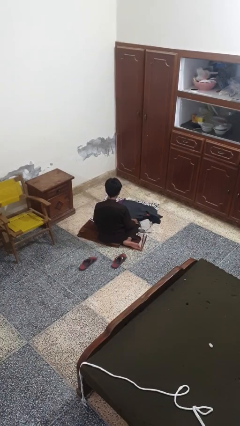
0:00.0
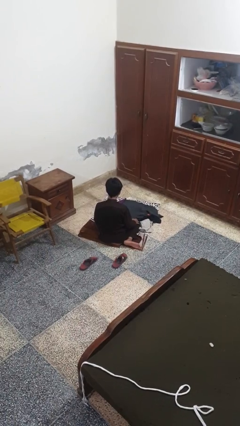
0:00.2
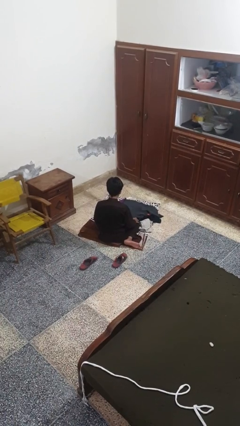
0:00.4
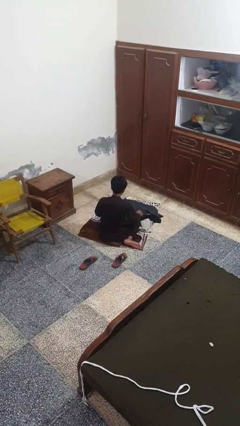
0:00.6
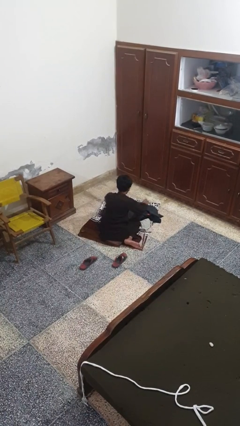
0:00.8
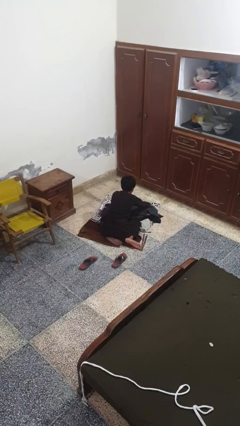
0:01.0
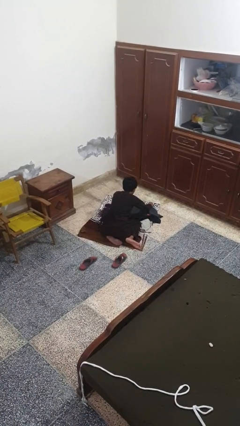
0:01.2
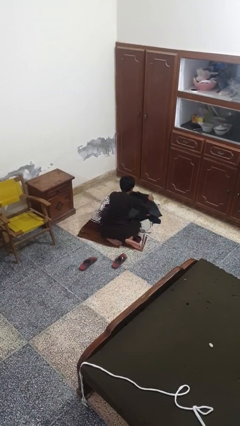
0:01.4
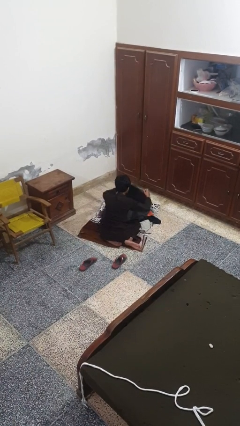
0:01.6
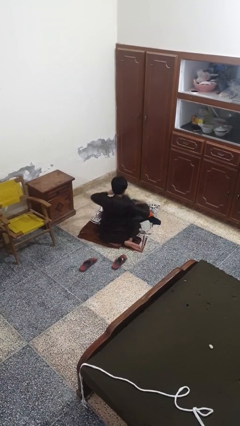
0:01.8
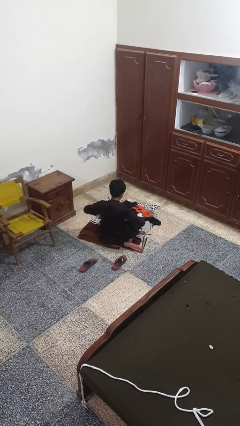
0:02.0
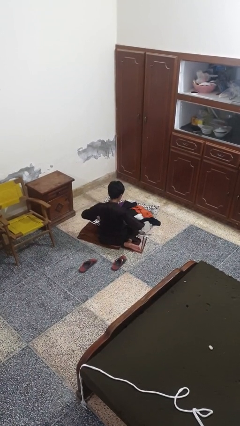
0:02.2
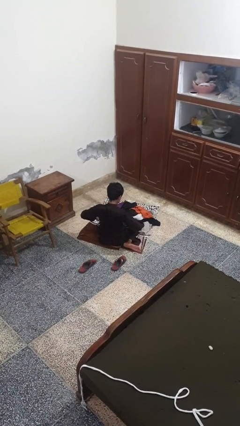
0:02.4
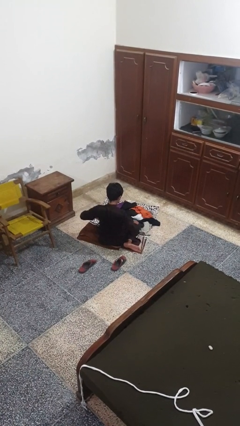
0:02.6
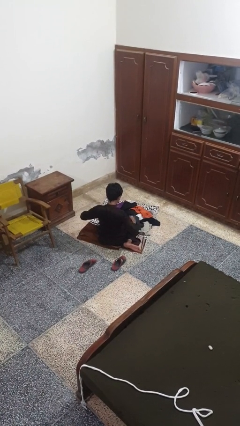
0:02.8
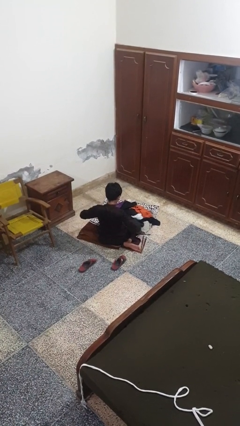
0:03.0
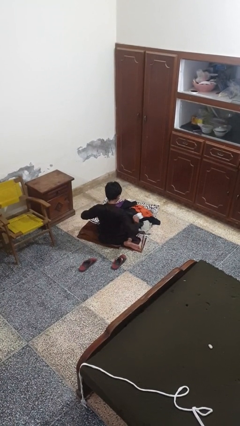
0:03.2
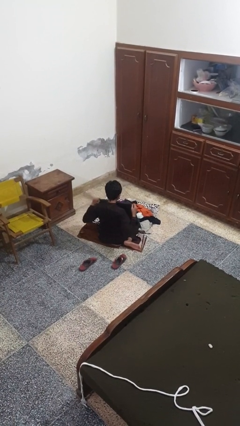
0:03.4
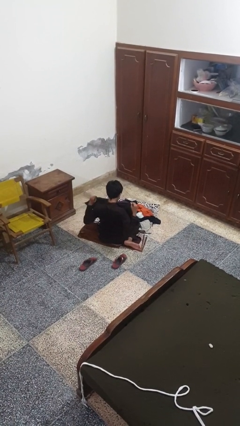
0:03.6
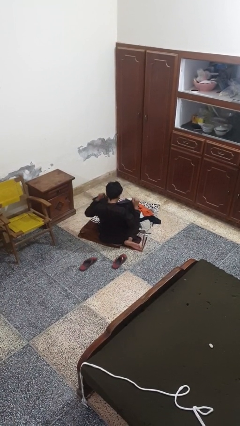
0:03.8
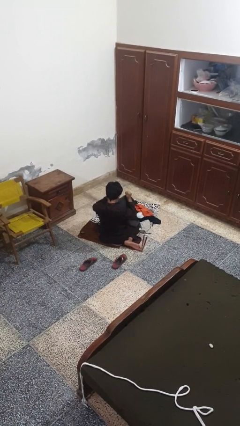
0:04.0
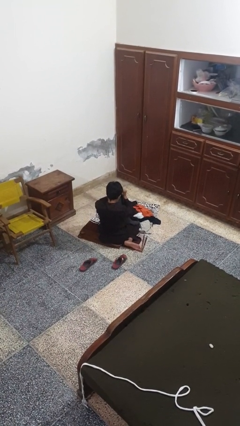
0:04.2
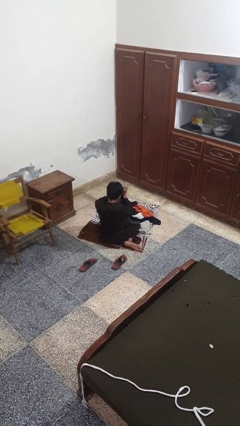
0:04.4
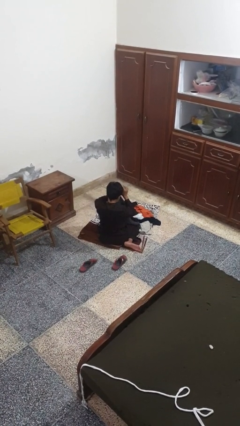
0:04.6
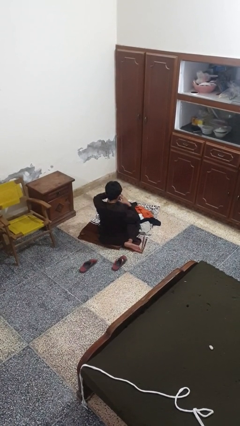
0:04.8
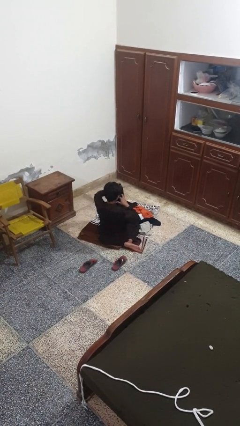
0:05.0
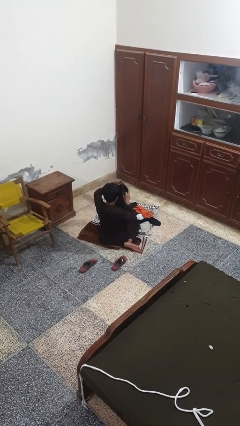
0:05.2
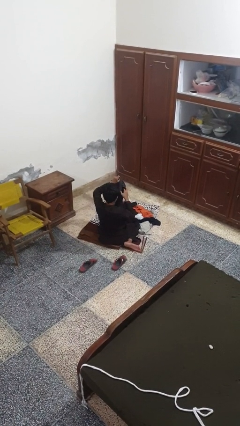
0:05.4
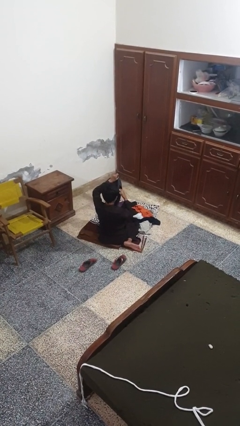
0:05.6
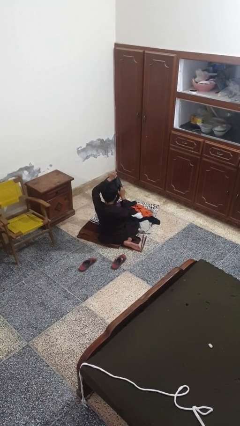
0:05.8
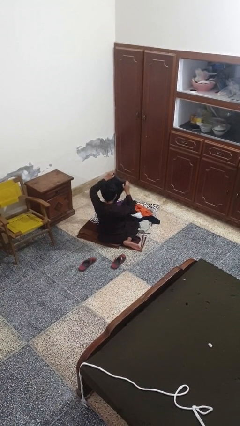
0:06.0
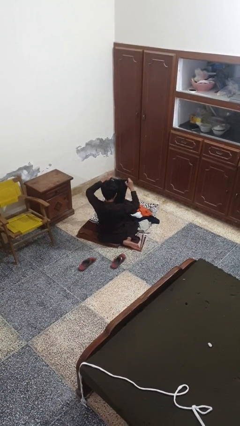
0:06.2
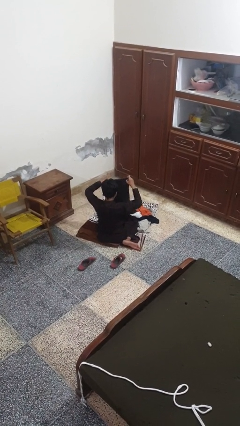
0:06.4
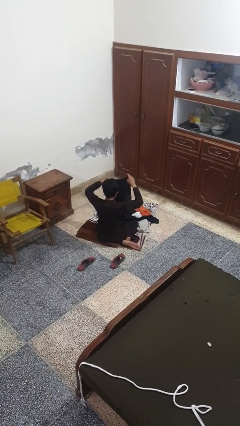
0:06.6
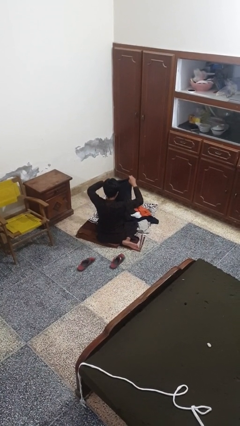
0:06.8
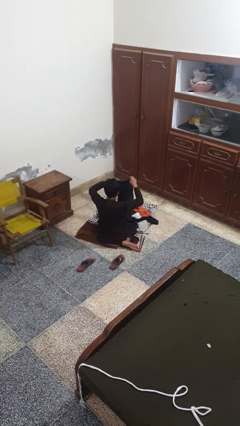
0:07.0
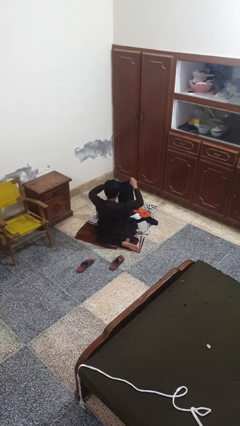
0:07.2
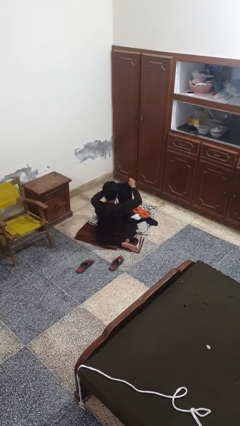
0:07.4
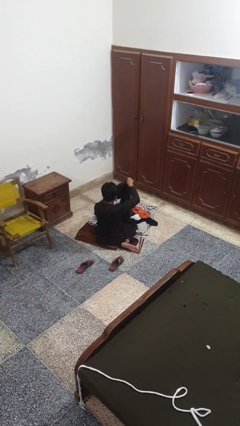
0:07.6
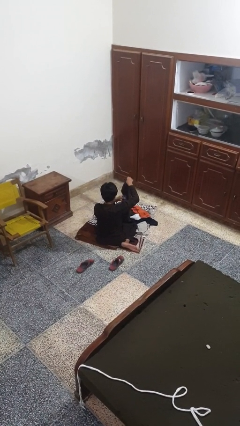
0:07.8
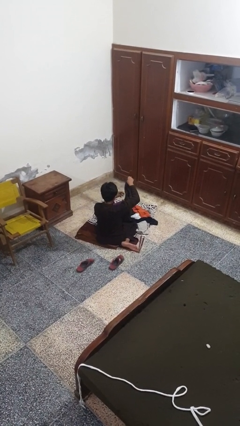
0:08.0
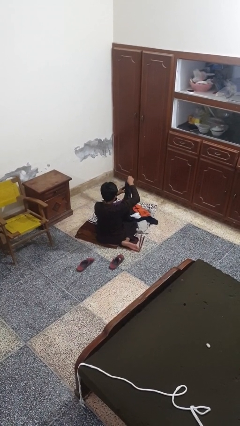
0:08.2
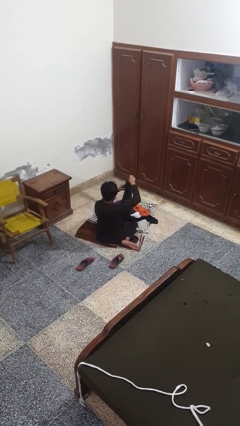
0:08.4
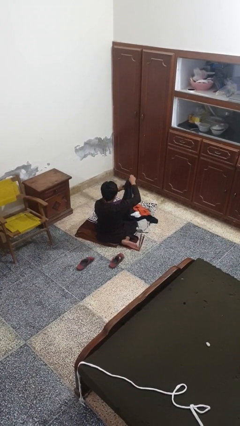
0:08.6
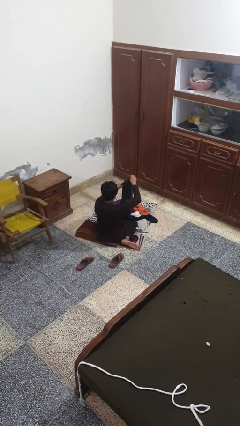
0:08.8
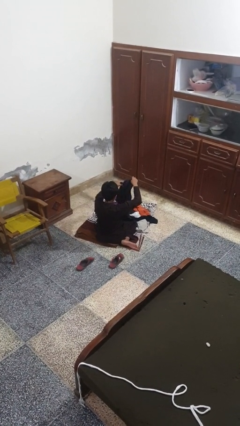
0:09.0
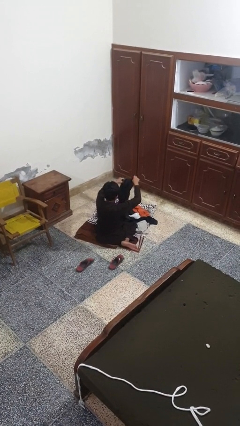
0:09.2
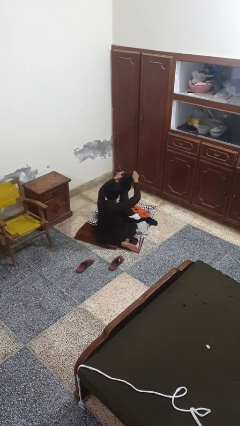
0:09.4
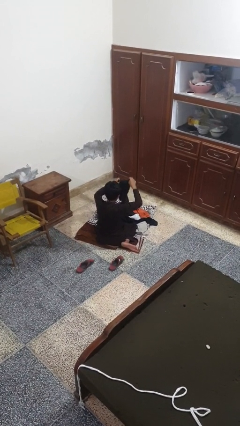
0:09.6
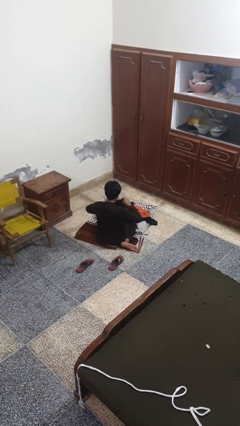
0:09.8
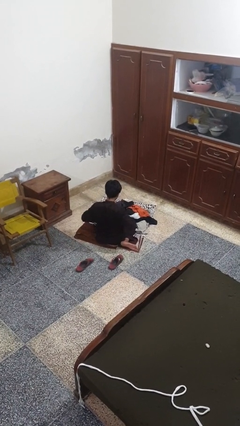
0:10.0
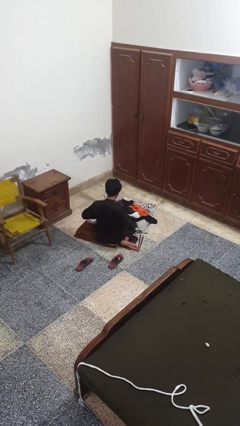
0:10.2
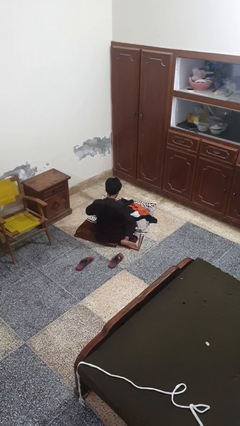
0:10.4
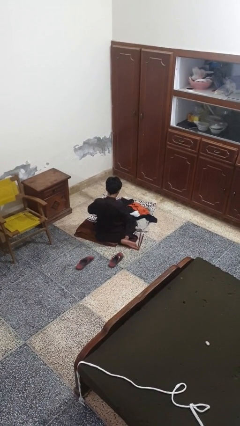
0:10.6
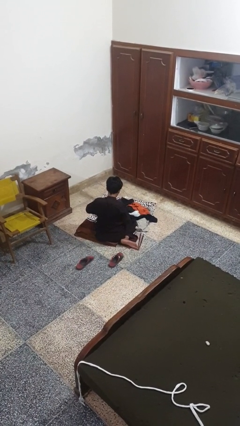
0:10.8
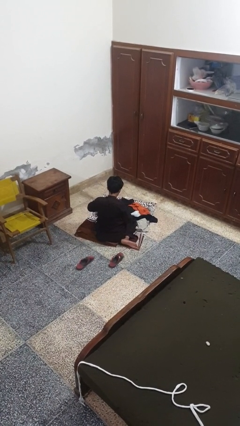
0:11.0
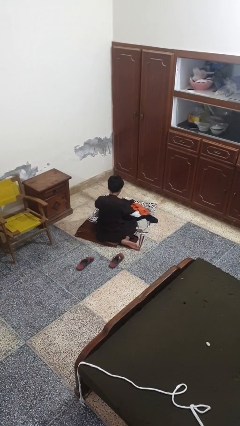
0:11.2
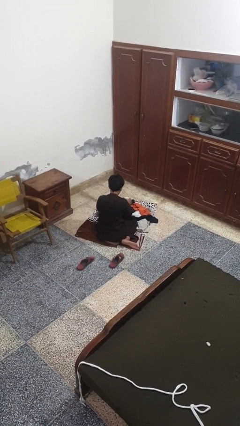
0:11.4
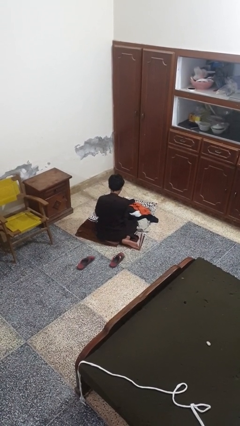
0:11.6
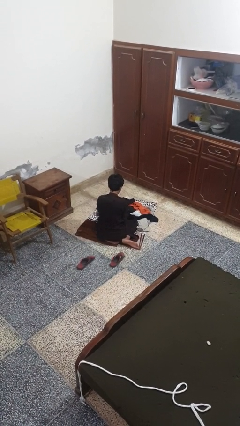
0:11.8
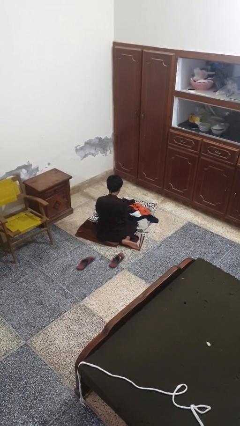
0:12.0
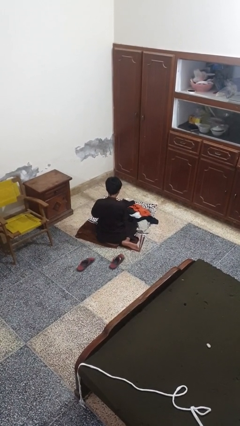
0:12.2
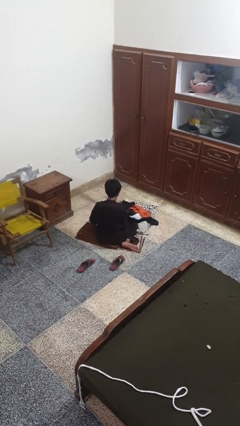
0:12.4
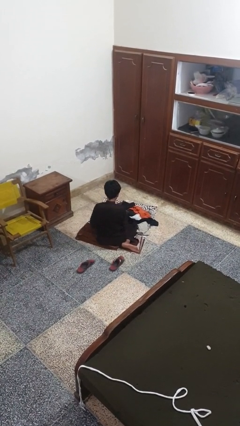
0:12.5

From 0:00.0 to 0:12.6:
person folds shirt

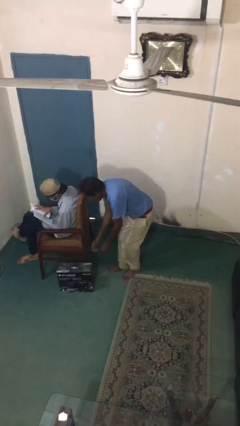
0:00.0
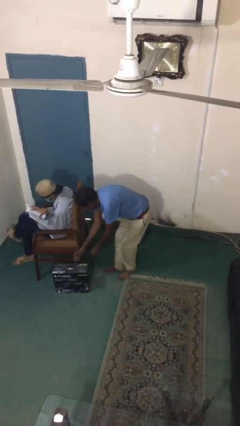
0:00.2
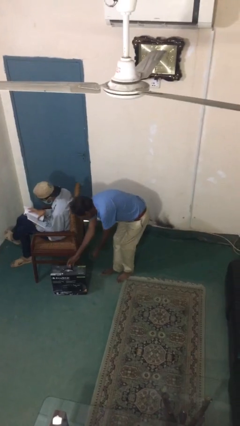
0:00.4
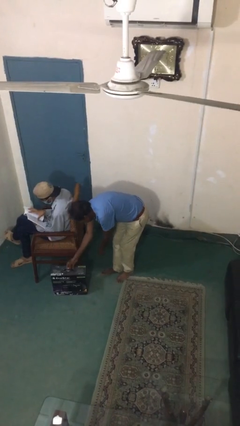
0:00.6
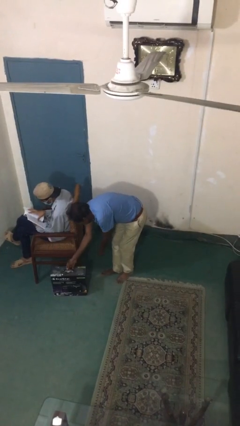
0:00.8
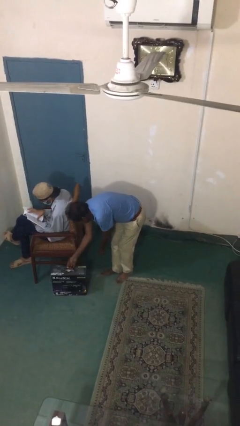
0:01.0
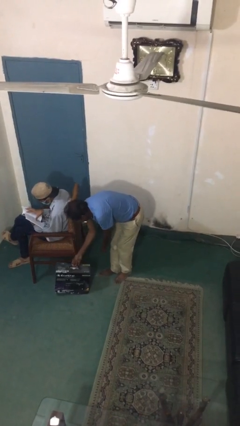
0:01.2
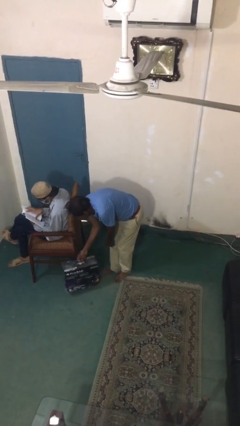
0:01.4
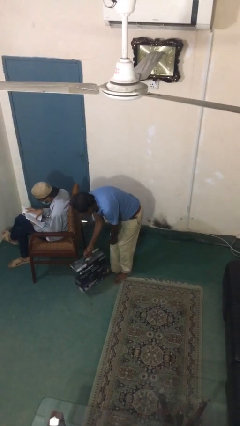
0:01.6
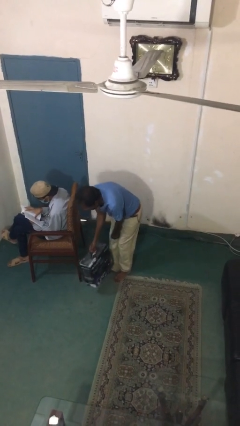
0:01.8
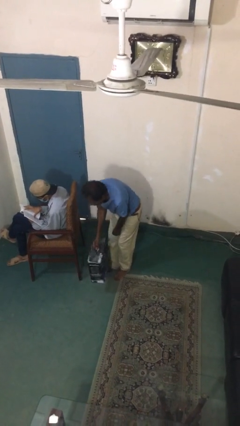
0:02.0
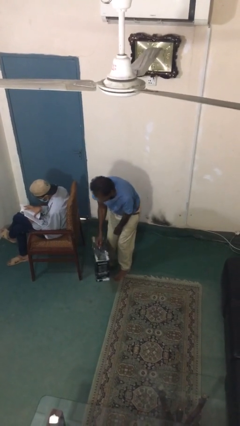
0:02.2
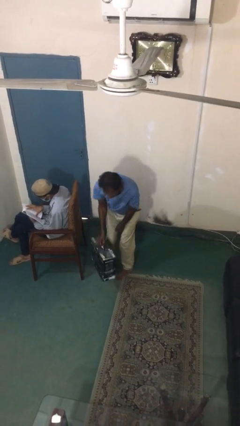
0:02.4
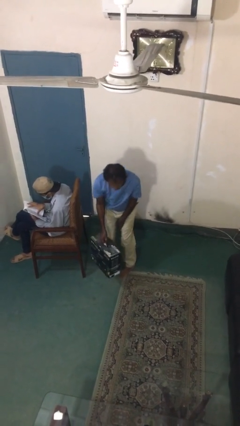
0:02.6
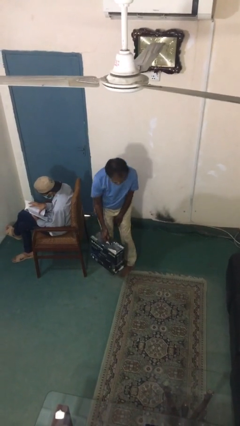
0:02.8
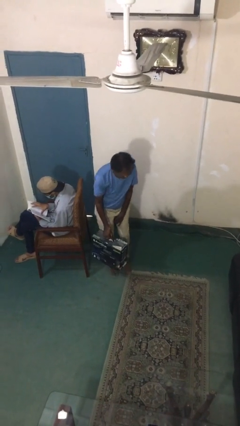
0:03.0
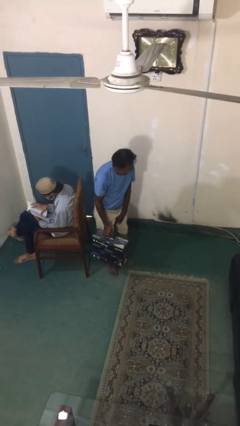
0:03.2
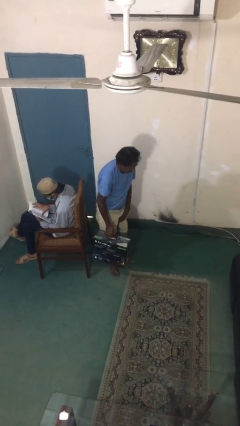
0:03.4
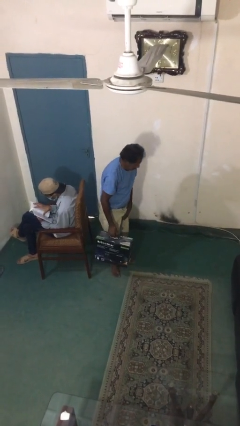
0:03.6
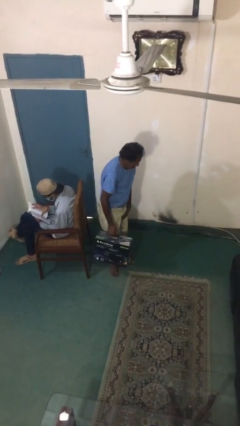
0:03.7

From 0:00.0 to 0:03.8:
person steals object from person

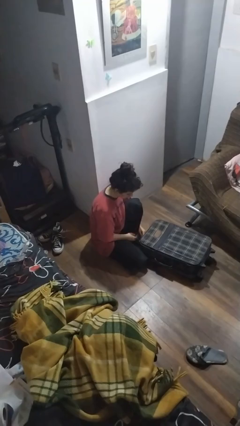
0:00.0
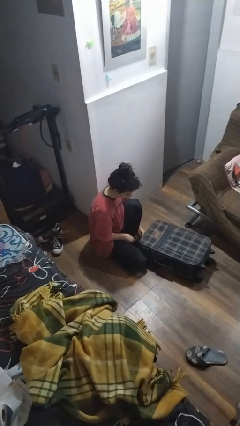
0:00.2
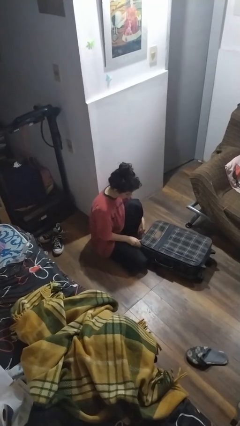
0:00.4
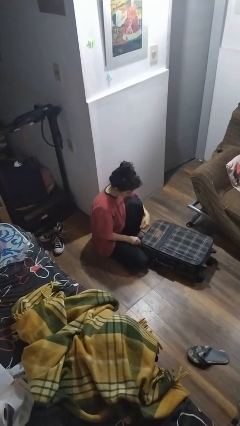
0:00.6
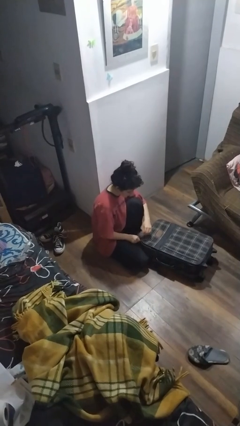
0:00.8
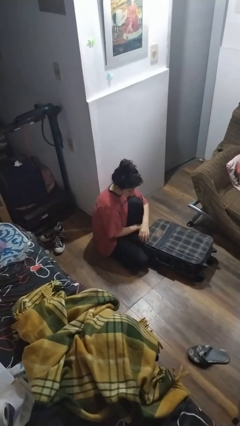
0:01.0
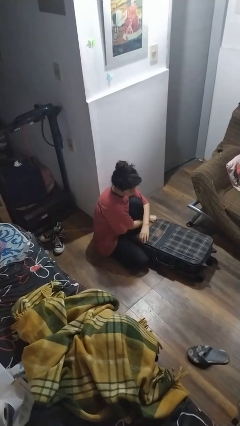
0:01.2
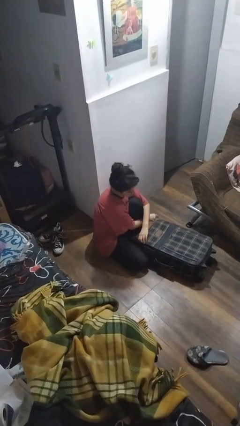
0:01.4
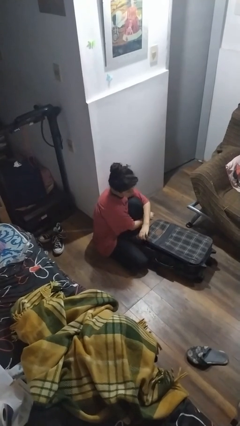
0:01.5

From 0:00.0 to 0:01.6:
person opens suitcase
